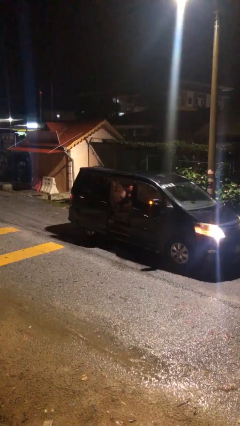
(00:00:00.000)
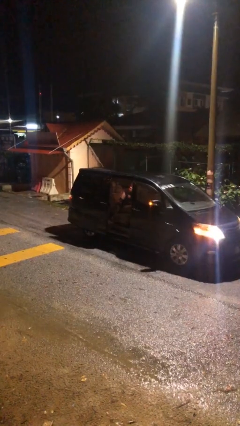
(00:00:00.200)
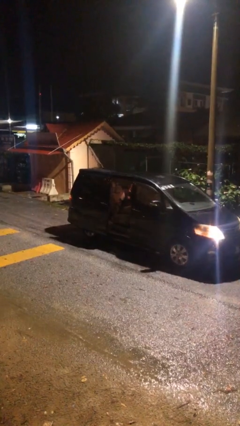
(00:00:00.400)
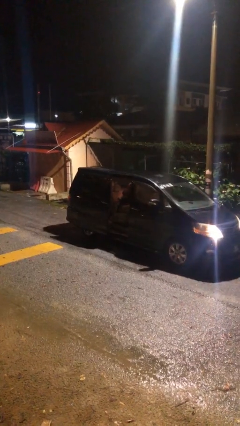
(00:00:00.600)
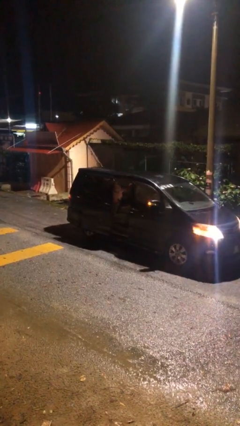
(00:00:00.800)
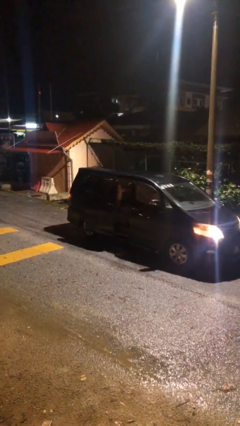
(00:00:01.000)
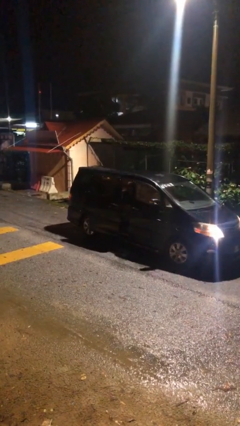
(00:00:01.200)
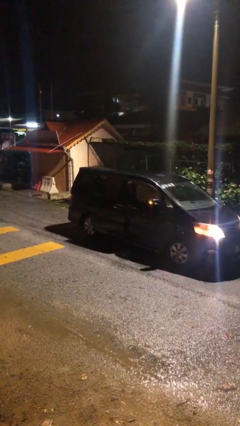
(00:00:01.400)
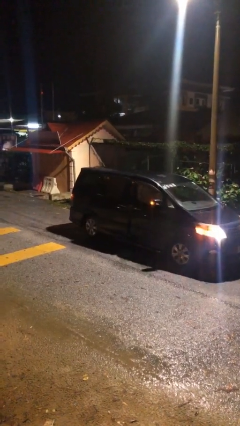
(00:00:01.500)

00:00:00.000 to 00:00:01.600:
person closes car door

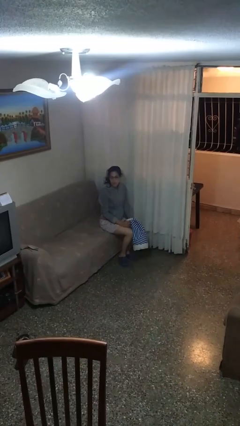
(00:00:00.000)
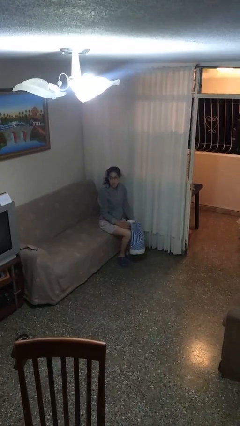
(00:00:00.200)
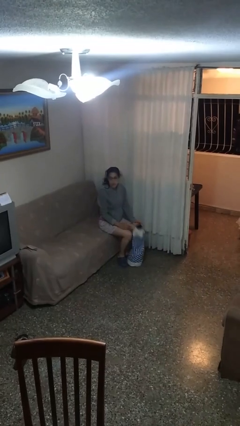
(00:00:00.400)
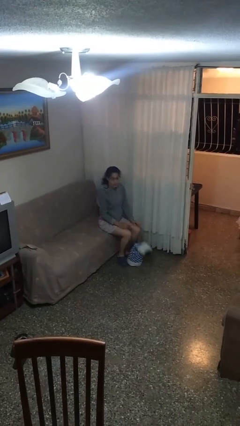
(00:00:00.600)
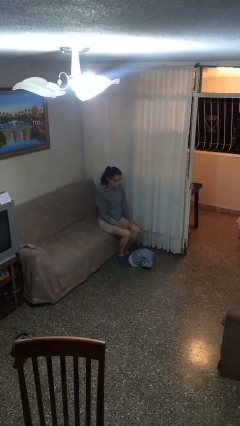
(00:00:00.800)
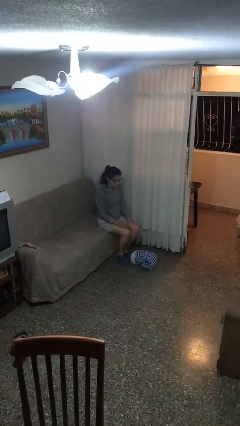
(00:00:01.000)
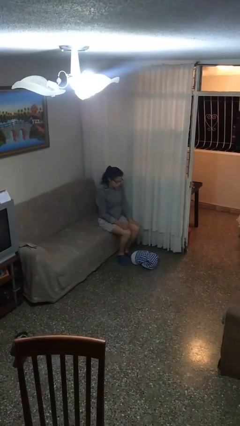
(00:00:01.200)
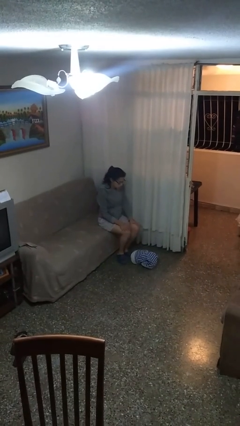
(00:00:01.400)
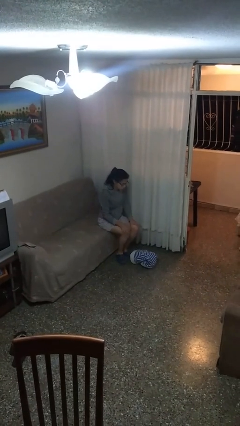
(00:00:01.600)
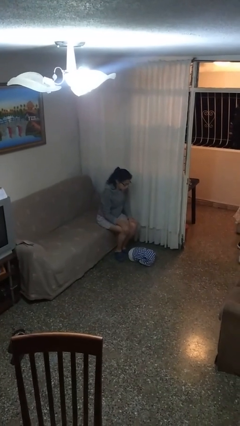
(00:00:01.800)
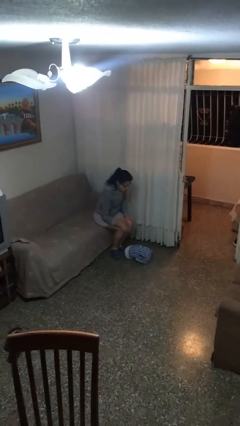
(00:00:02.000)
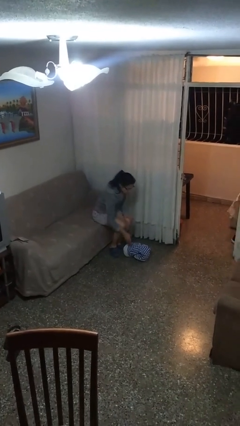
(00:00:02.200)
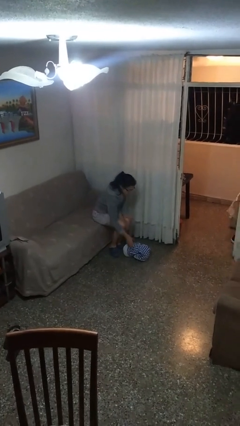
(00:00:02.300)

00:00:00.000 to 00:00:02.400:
person drops object

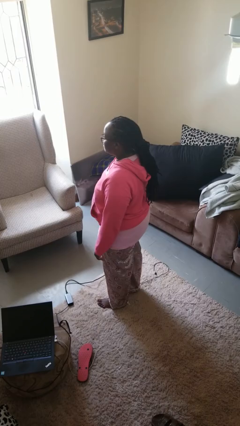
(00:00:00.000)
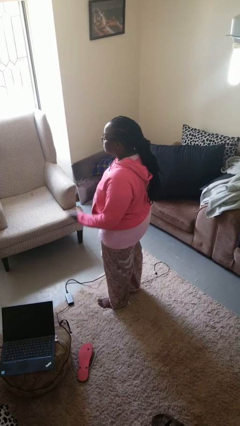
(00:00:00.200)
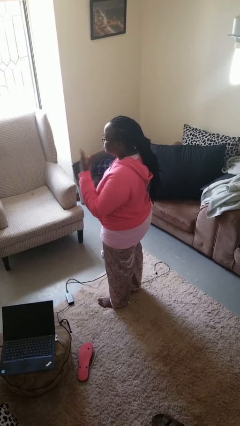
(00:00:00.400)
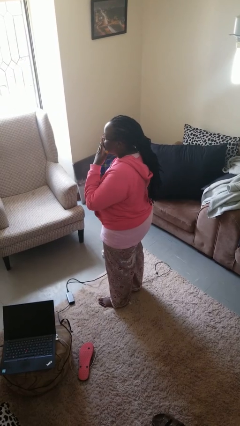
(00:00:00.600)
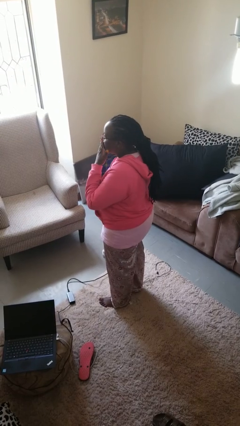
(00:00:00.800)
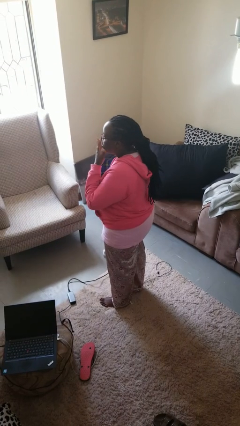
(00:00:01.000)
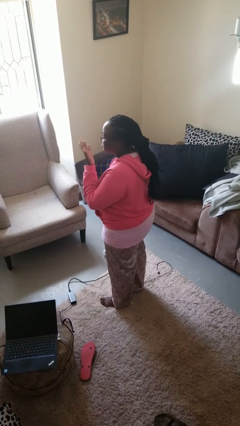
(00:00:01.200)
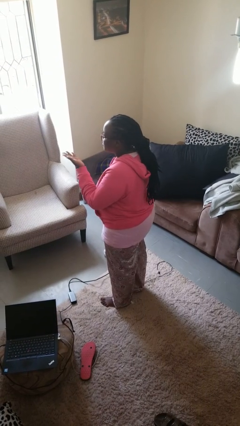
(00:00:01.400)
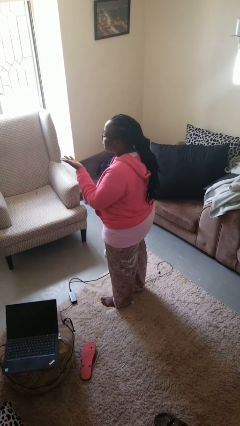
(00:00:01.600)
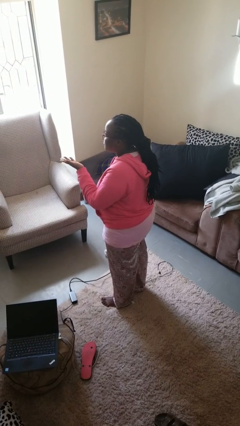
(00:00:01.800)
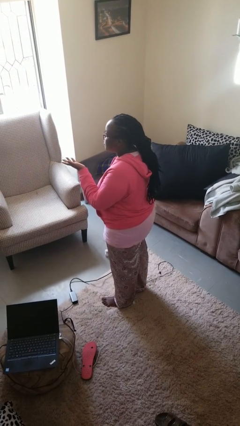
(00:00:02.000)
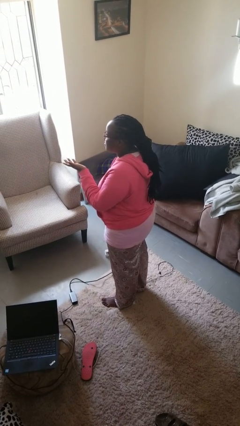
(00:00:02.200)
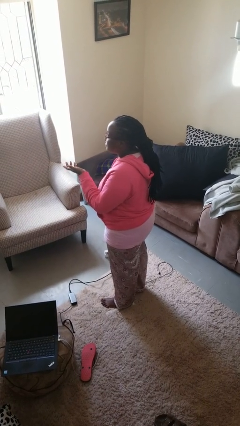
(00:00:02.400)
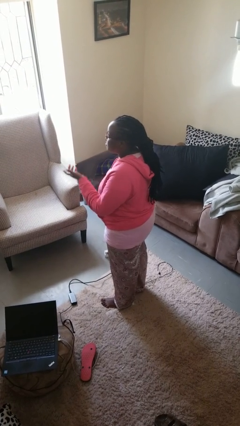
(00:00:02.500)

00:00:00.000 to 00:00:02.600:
person gestures blow kiss

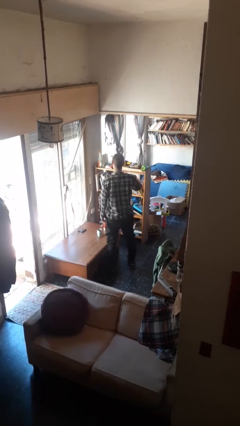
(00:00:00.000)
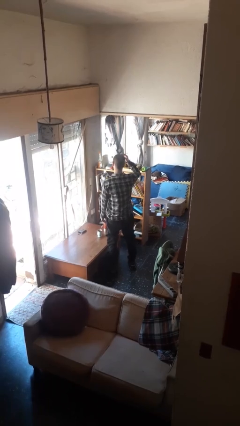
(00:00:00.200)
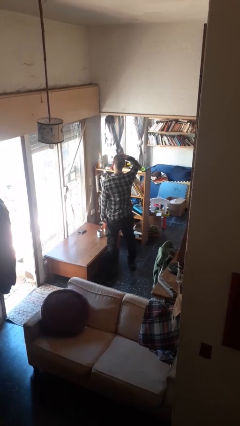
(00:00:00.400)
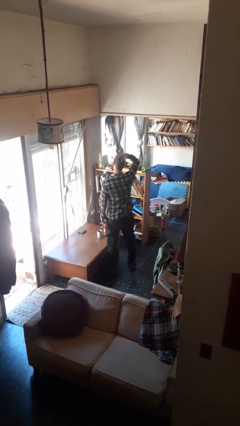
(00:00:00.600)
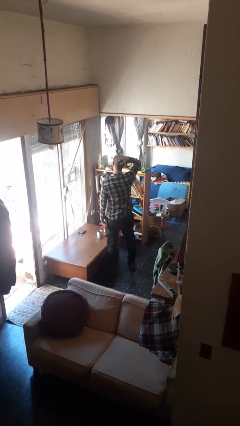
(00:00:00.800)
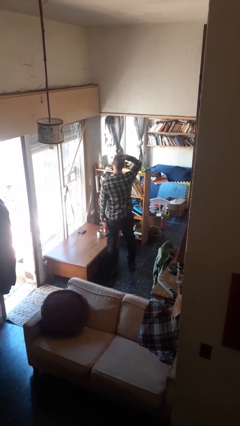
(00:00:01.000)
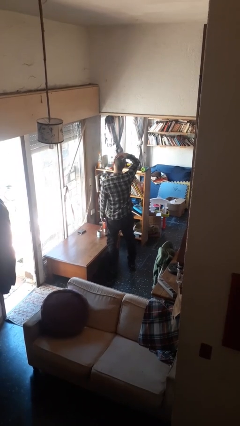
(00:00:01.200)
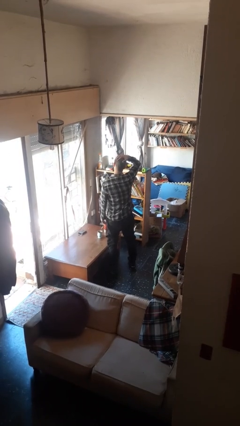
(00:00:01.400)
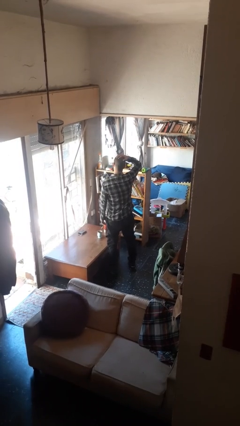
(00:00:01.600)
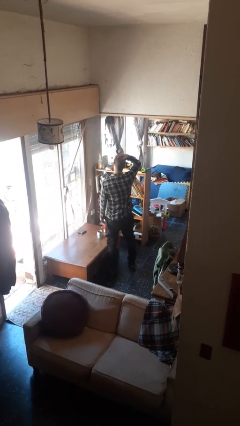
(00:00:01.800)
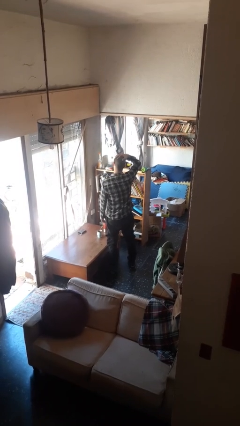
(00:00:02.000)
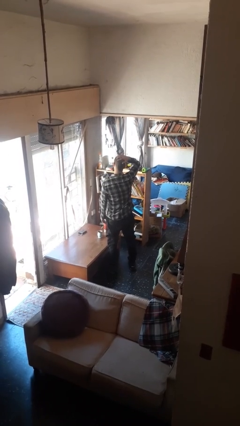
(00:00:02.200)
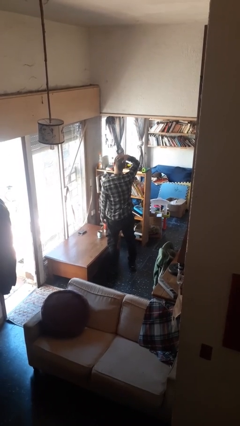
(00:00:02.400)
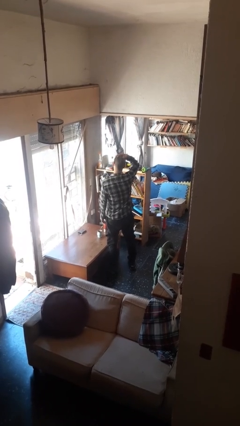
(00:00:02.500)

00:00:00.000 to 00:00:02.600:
person pats head

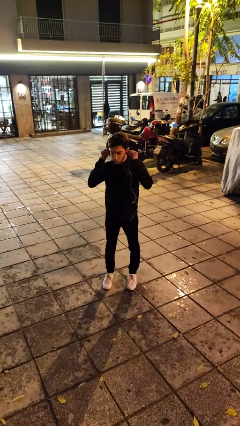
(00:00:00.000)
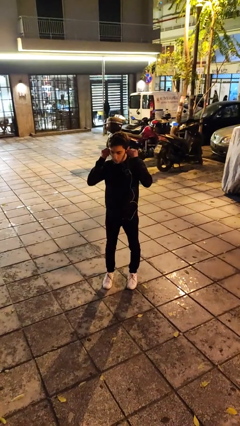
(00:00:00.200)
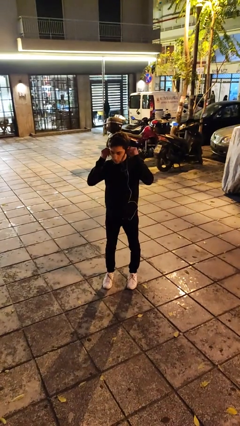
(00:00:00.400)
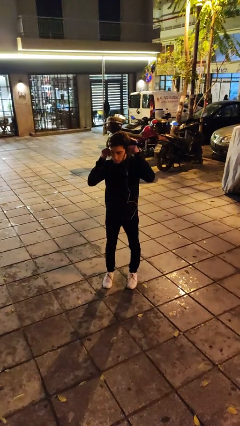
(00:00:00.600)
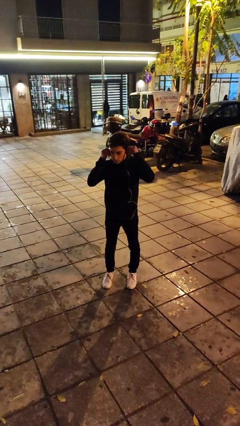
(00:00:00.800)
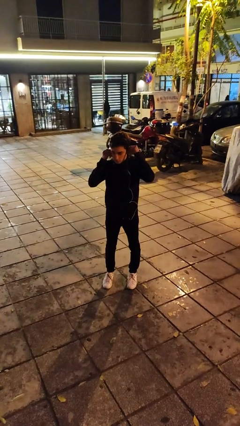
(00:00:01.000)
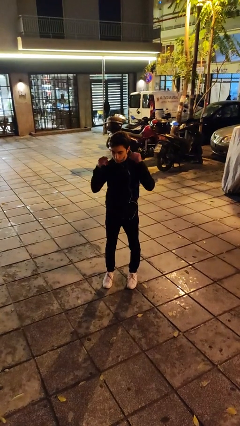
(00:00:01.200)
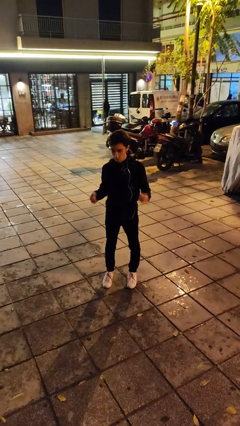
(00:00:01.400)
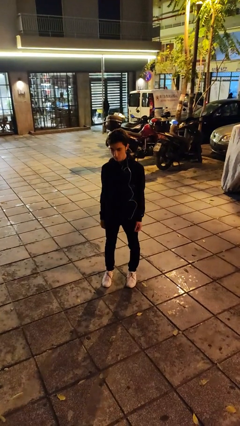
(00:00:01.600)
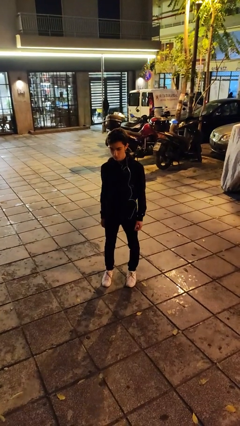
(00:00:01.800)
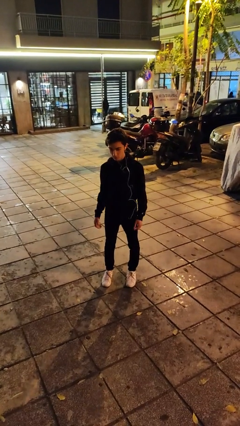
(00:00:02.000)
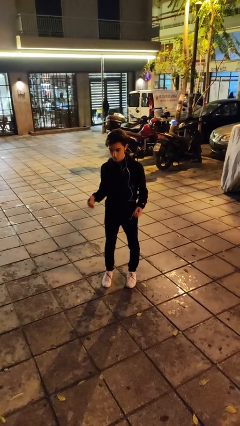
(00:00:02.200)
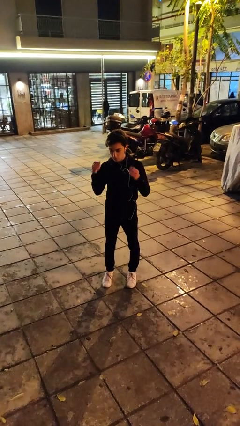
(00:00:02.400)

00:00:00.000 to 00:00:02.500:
person puts on headphones

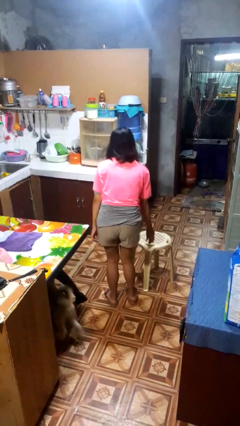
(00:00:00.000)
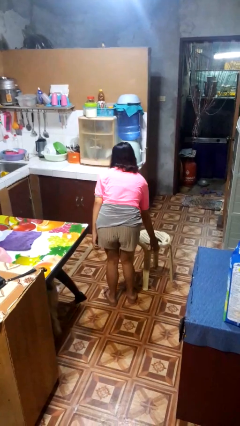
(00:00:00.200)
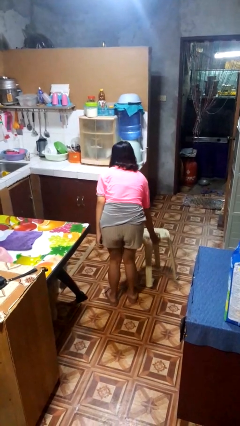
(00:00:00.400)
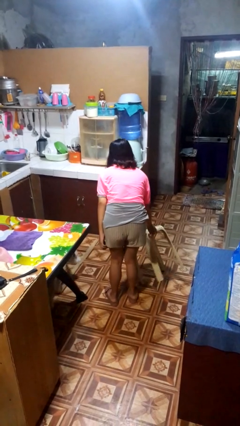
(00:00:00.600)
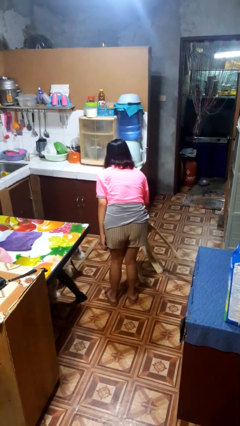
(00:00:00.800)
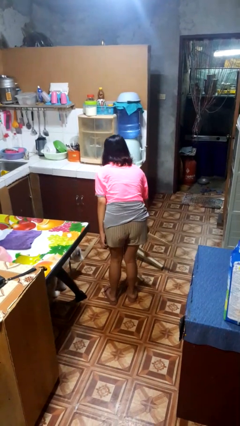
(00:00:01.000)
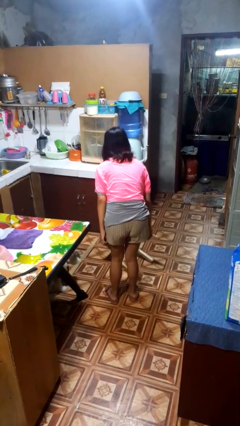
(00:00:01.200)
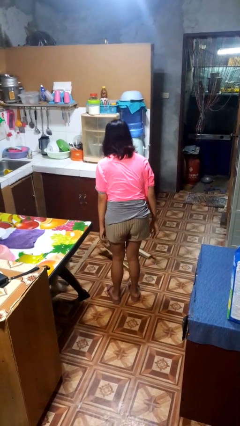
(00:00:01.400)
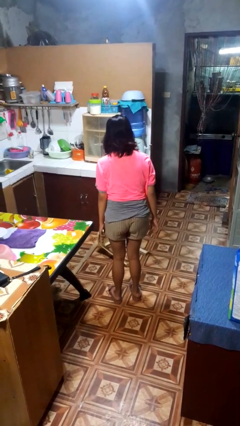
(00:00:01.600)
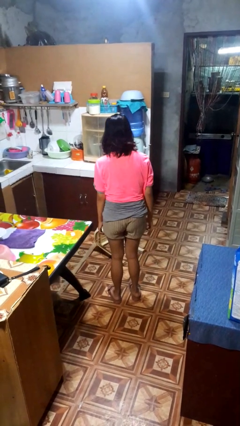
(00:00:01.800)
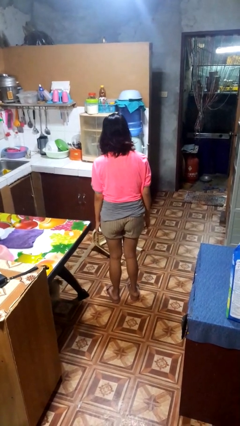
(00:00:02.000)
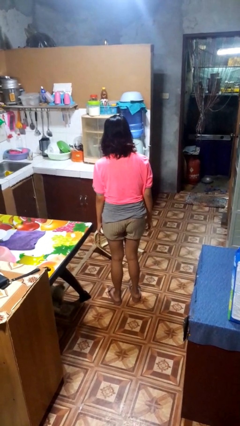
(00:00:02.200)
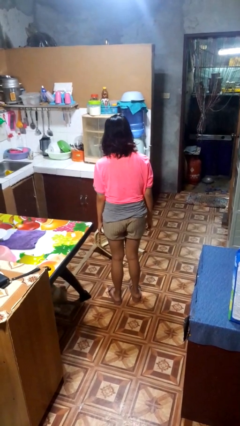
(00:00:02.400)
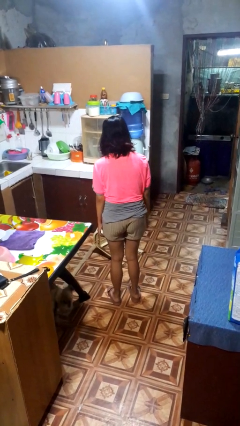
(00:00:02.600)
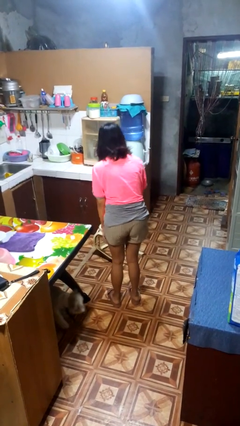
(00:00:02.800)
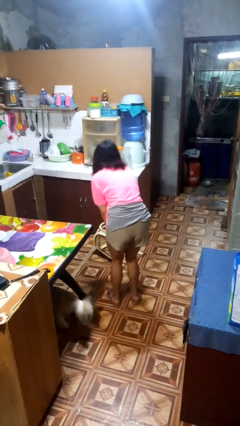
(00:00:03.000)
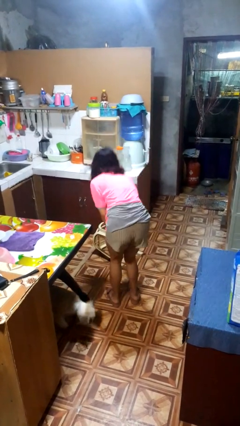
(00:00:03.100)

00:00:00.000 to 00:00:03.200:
person knocks over furniture

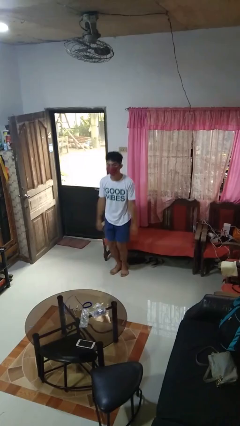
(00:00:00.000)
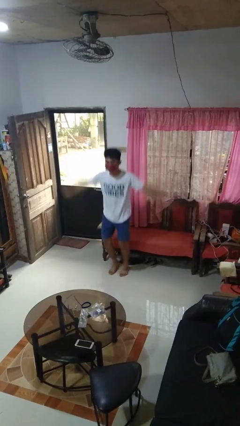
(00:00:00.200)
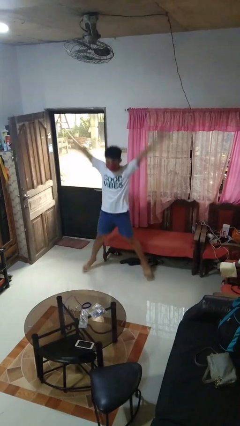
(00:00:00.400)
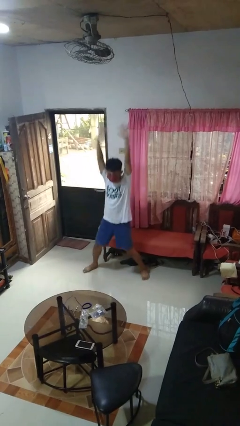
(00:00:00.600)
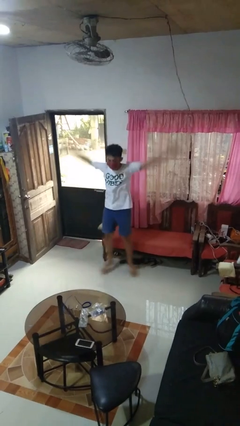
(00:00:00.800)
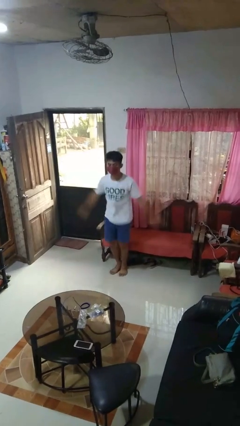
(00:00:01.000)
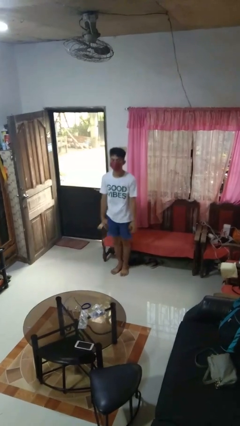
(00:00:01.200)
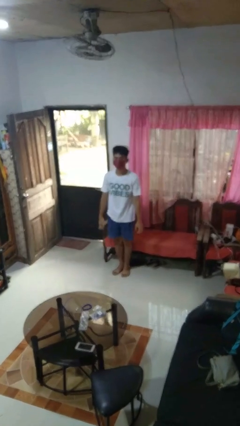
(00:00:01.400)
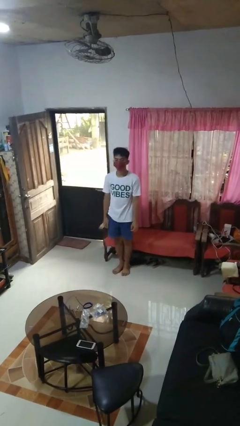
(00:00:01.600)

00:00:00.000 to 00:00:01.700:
person exercises with jumping jacks
